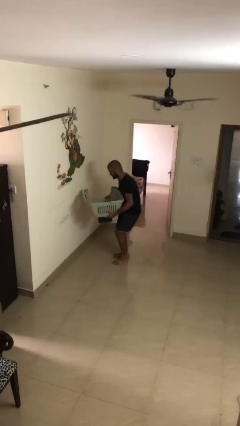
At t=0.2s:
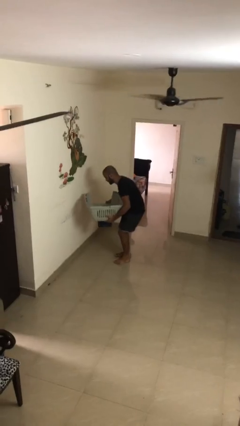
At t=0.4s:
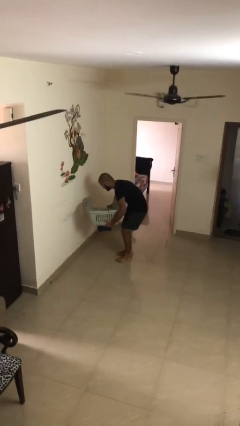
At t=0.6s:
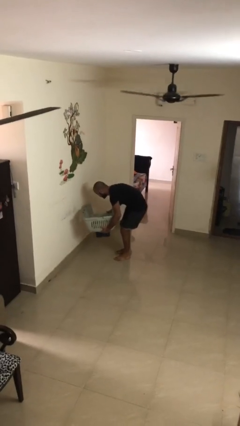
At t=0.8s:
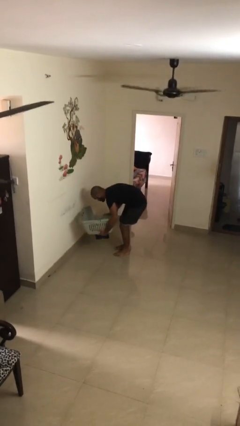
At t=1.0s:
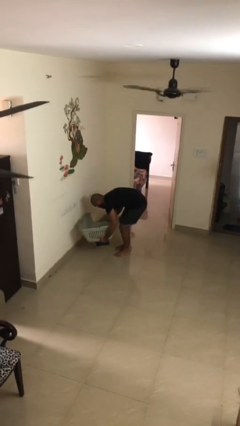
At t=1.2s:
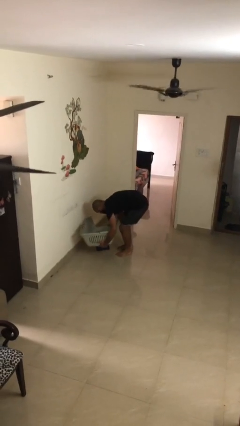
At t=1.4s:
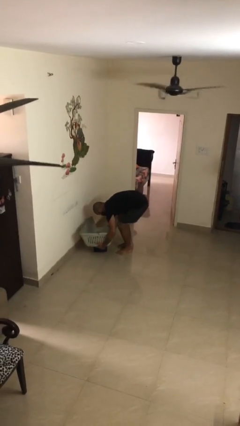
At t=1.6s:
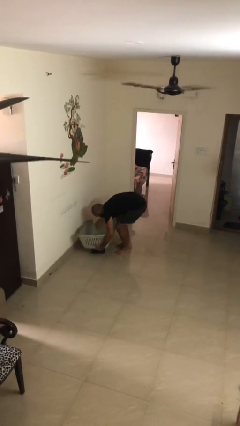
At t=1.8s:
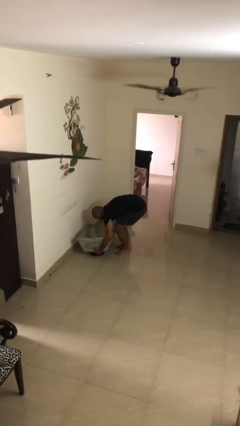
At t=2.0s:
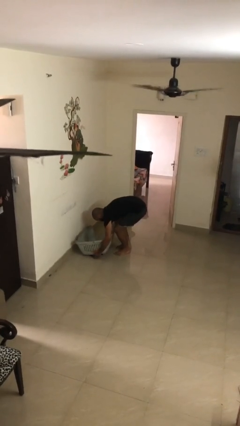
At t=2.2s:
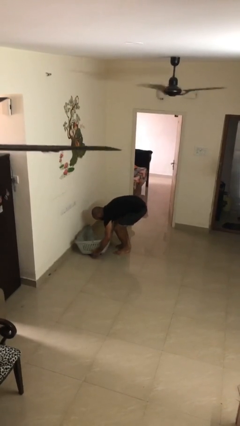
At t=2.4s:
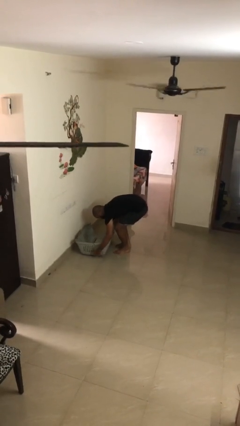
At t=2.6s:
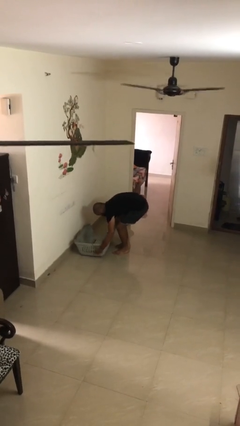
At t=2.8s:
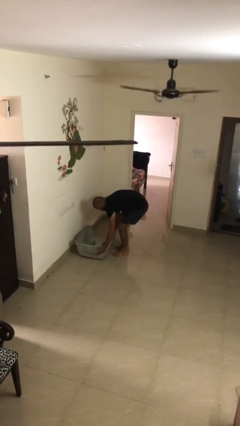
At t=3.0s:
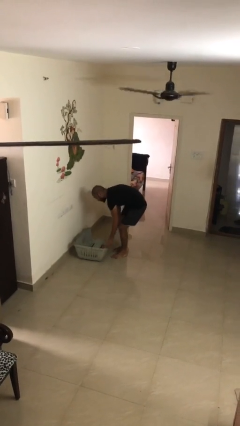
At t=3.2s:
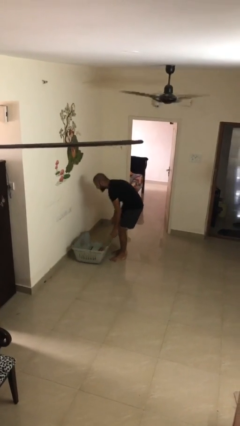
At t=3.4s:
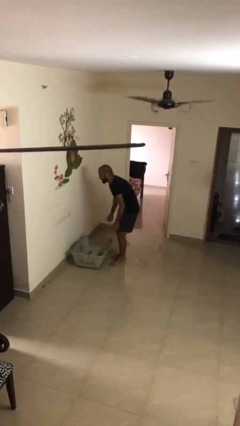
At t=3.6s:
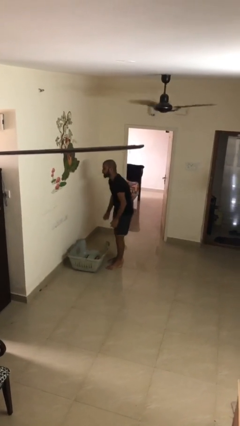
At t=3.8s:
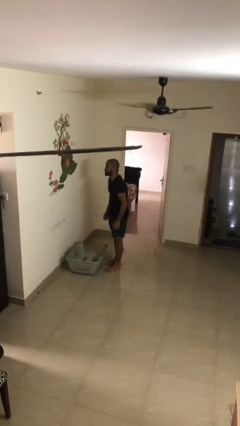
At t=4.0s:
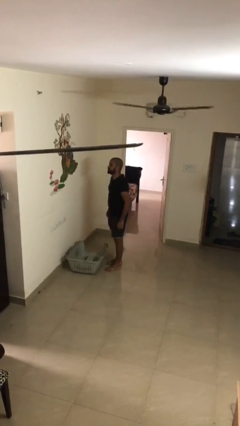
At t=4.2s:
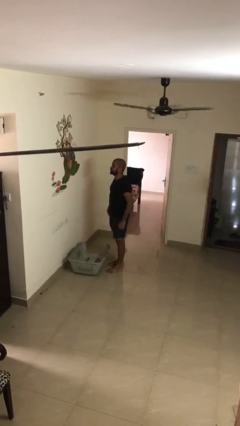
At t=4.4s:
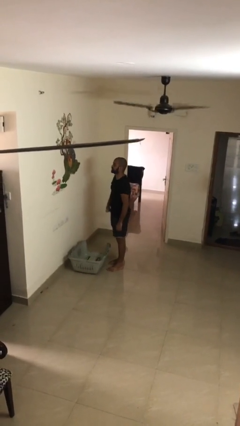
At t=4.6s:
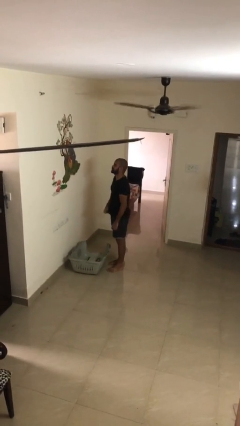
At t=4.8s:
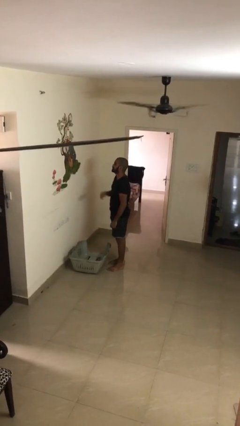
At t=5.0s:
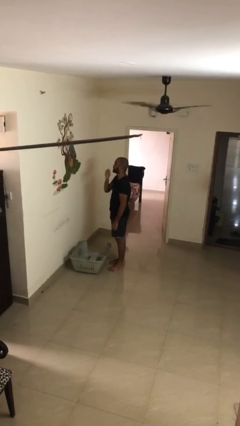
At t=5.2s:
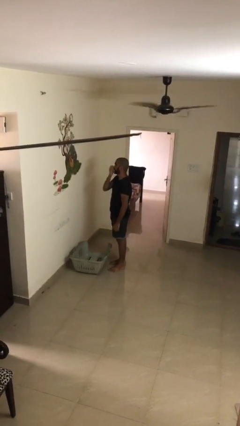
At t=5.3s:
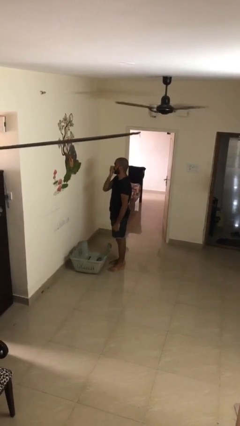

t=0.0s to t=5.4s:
person puts down object on floor

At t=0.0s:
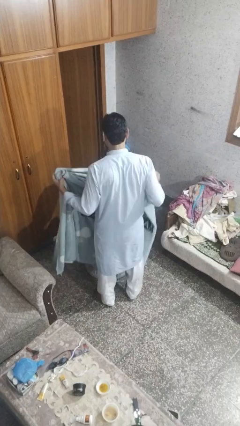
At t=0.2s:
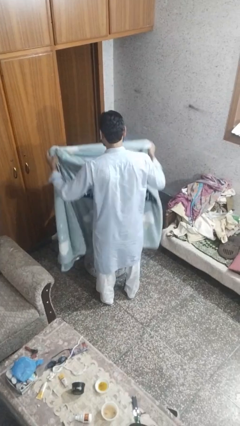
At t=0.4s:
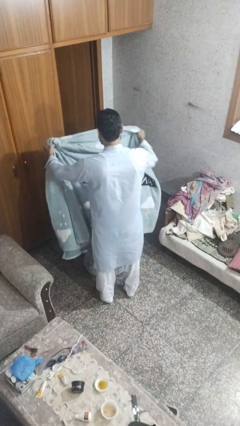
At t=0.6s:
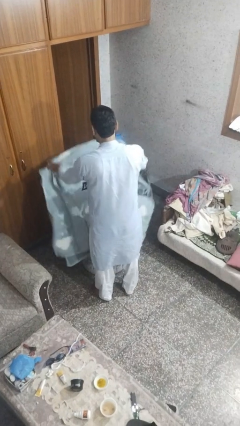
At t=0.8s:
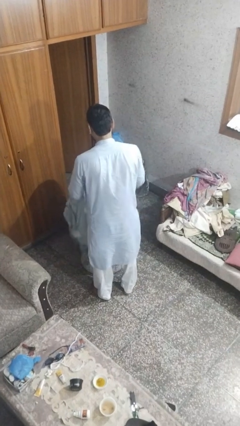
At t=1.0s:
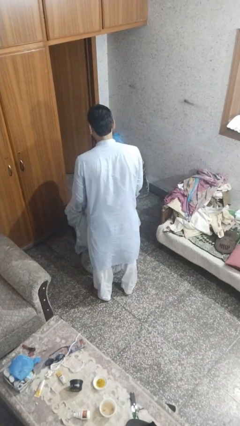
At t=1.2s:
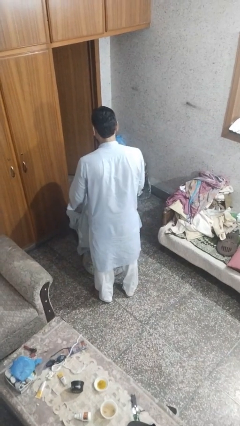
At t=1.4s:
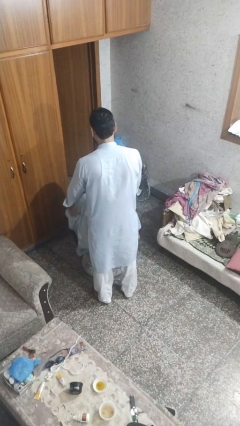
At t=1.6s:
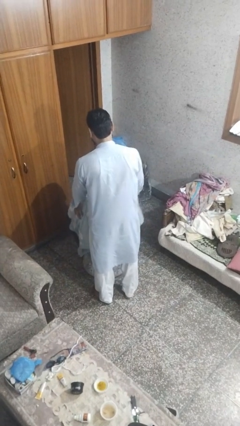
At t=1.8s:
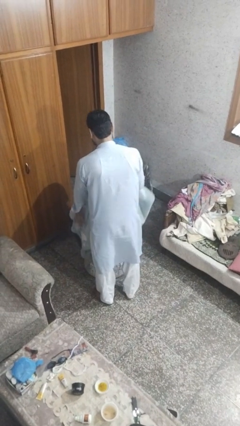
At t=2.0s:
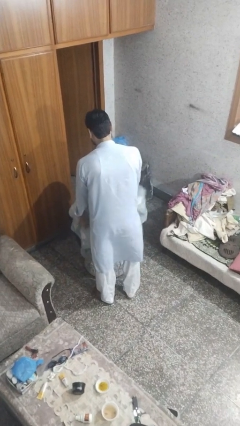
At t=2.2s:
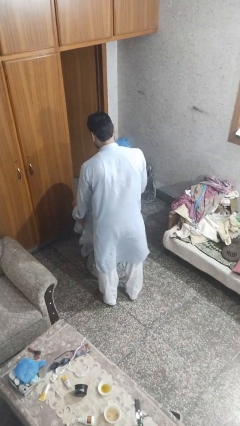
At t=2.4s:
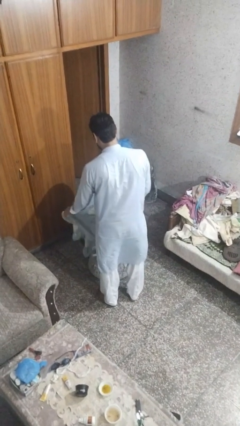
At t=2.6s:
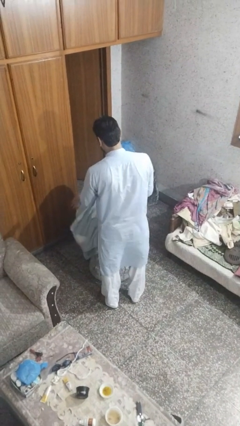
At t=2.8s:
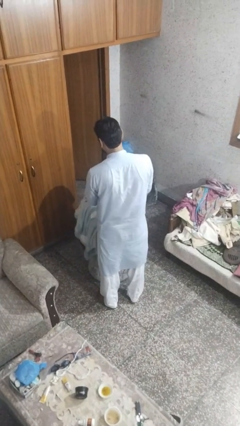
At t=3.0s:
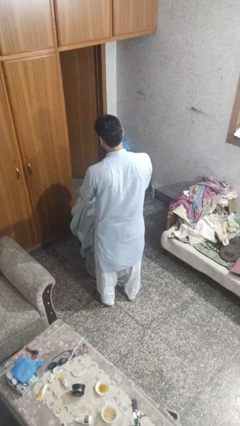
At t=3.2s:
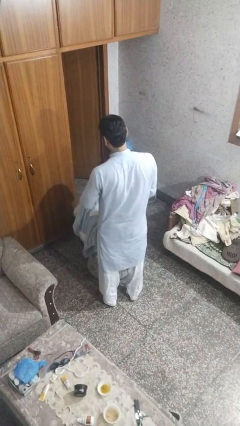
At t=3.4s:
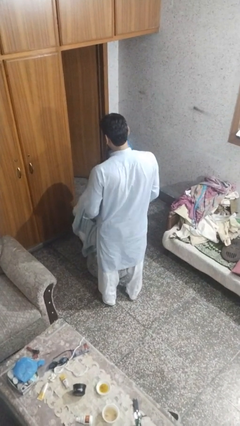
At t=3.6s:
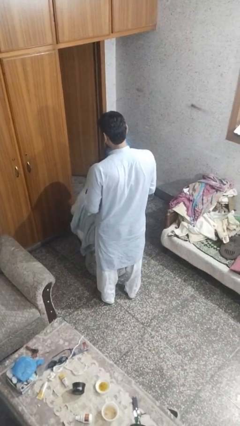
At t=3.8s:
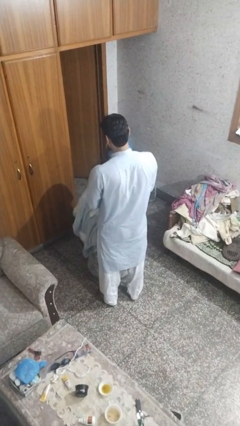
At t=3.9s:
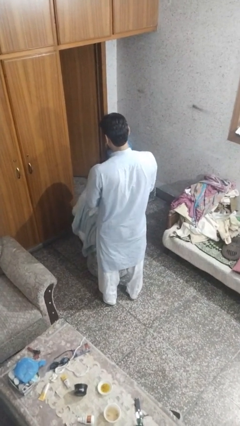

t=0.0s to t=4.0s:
person covers friend with blanket

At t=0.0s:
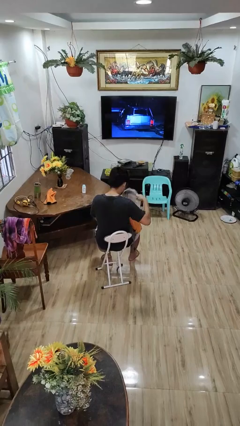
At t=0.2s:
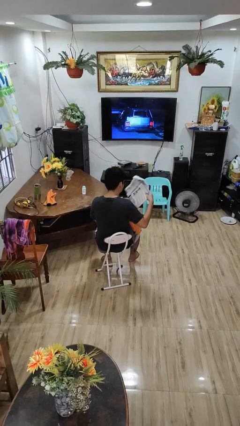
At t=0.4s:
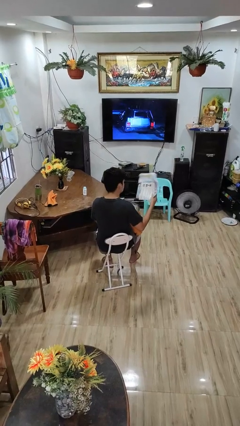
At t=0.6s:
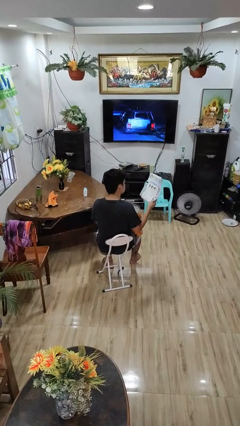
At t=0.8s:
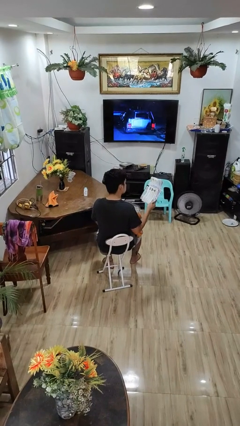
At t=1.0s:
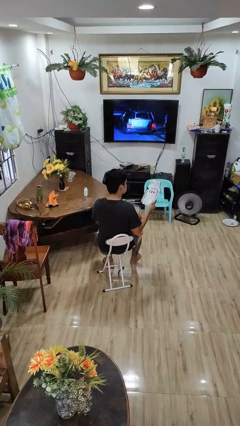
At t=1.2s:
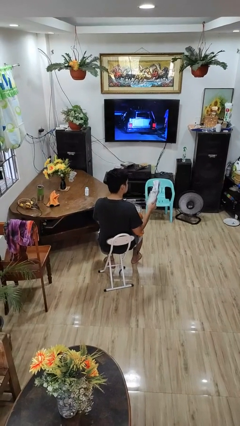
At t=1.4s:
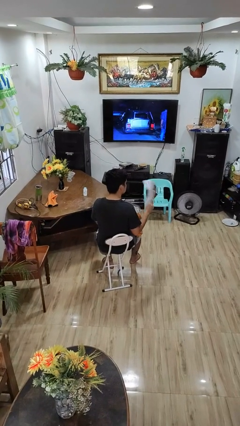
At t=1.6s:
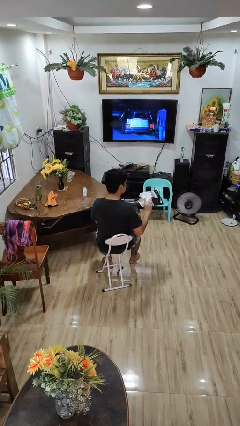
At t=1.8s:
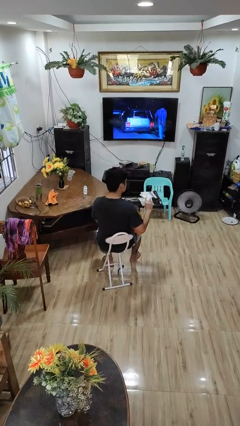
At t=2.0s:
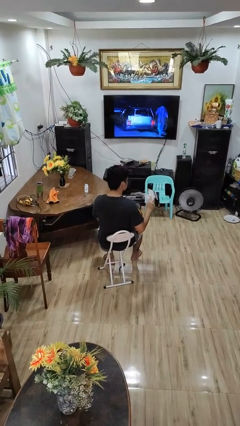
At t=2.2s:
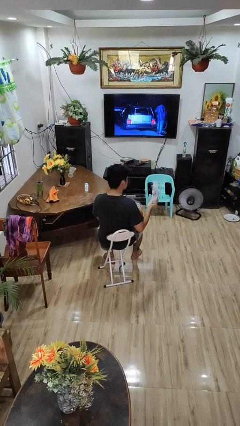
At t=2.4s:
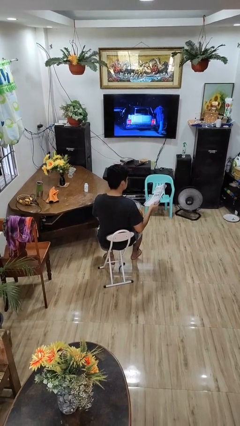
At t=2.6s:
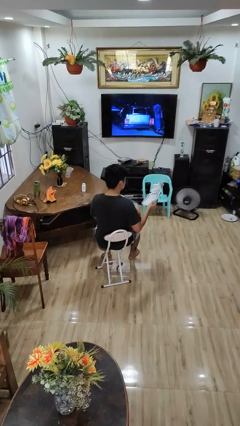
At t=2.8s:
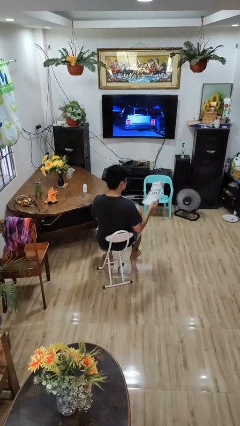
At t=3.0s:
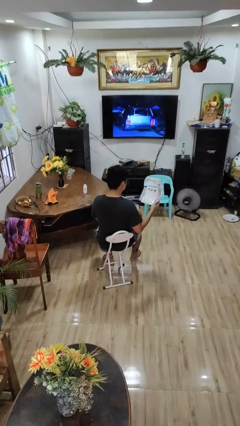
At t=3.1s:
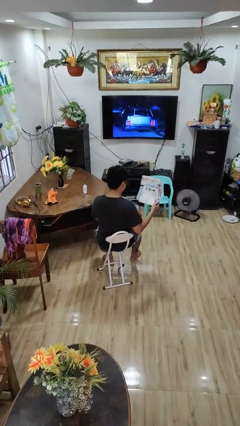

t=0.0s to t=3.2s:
person takes object from backpack

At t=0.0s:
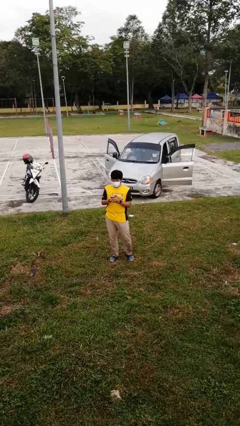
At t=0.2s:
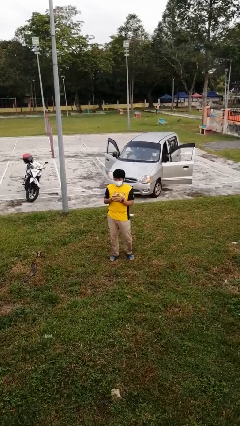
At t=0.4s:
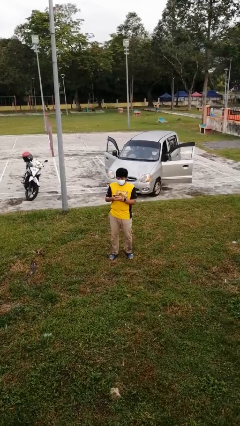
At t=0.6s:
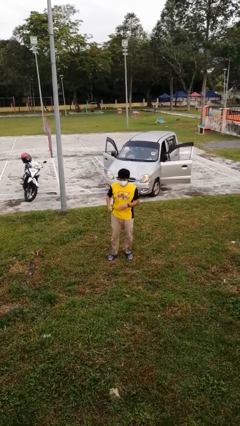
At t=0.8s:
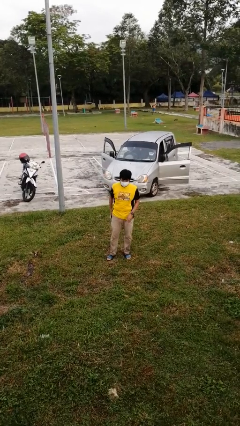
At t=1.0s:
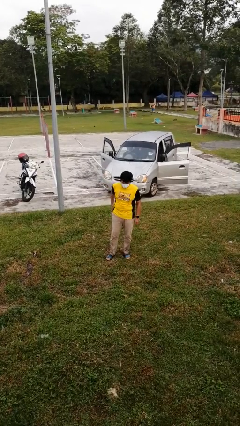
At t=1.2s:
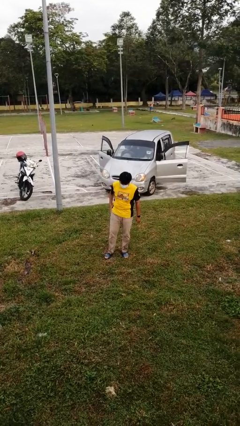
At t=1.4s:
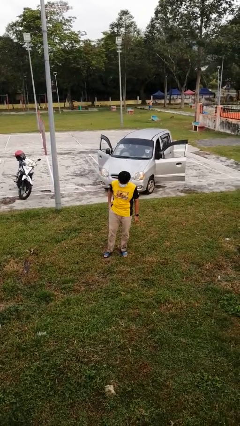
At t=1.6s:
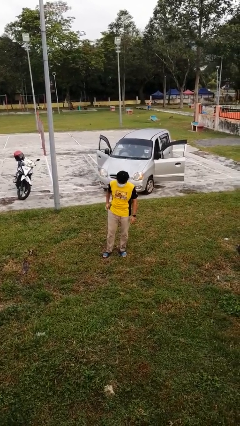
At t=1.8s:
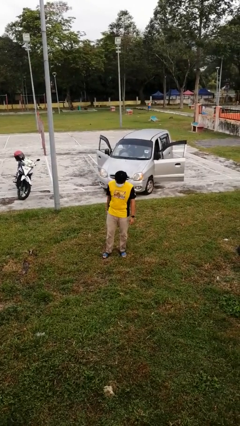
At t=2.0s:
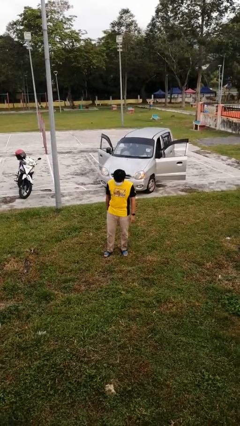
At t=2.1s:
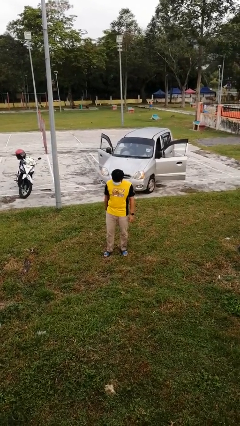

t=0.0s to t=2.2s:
person puts phone into pocket

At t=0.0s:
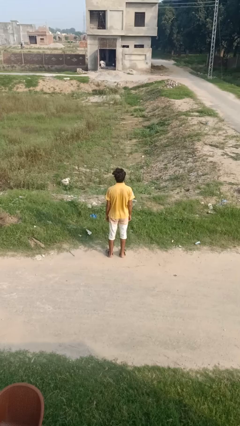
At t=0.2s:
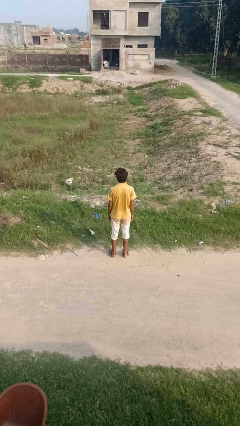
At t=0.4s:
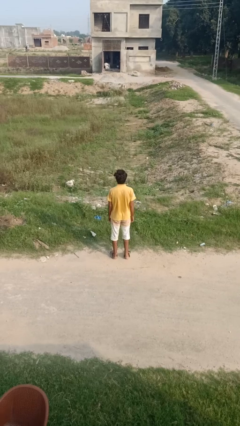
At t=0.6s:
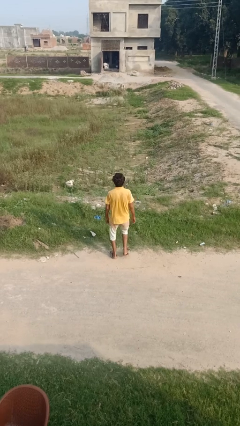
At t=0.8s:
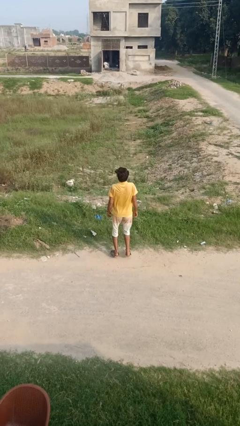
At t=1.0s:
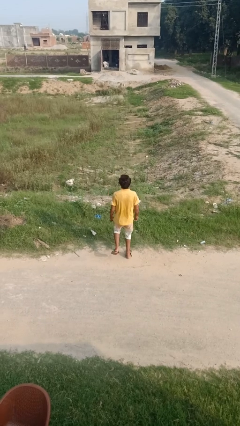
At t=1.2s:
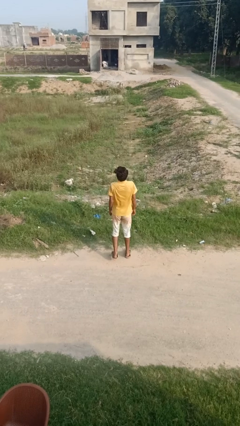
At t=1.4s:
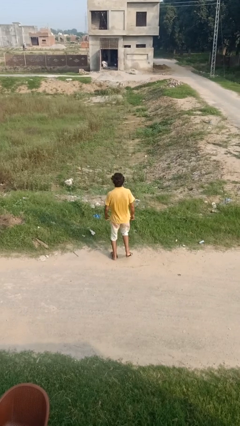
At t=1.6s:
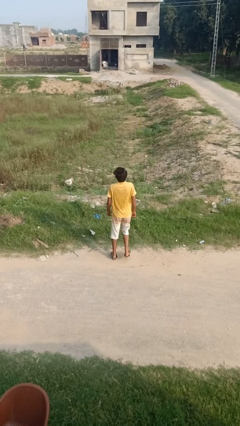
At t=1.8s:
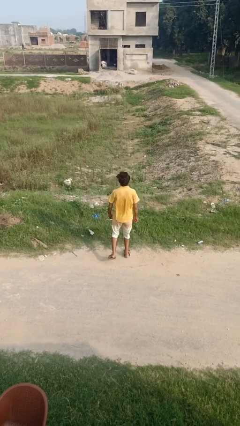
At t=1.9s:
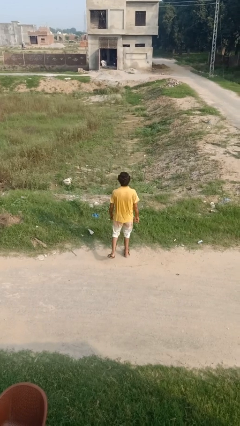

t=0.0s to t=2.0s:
person dances in place

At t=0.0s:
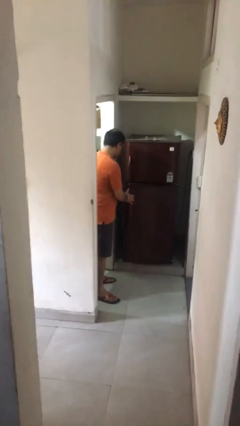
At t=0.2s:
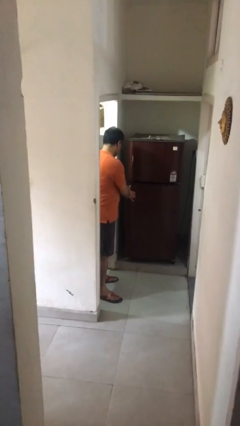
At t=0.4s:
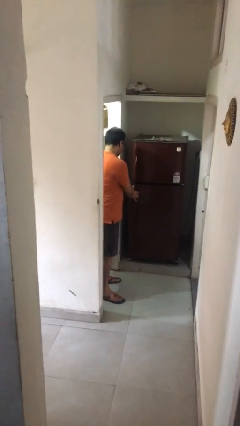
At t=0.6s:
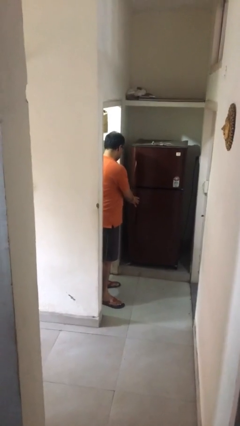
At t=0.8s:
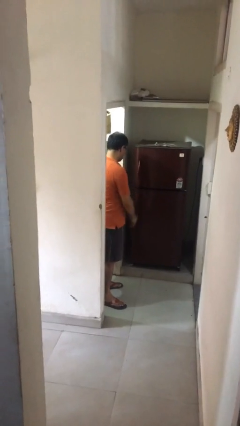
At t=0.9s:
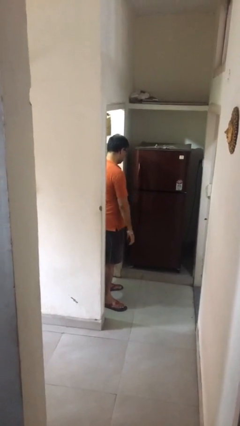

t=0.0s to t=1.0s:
person closes refrigerator
